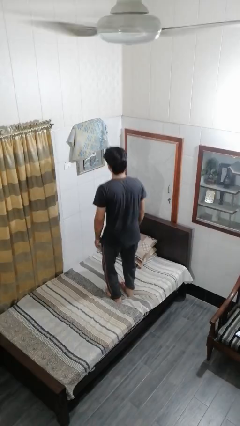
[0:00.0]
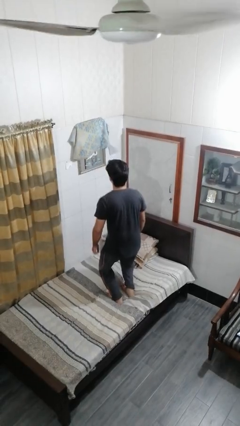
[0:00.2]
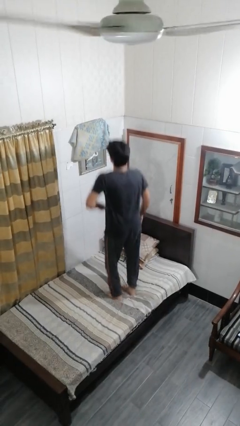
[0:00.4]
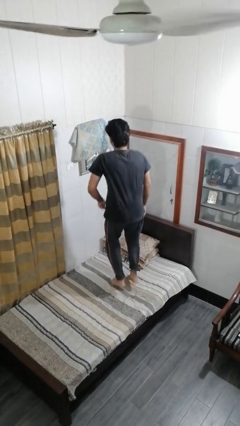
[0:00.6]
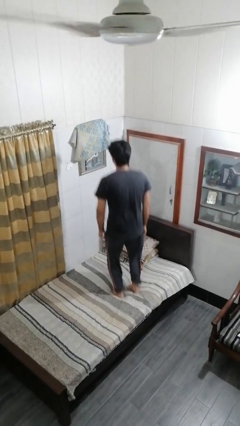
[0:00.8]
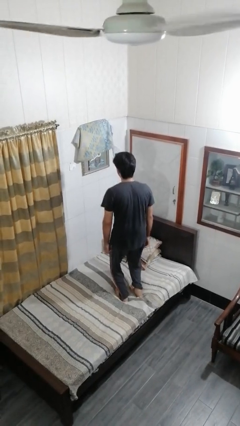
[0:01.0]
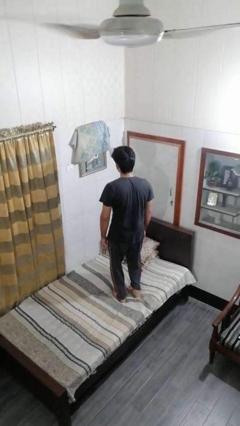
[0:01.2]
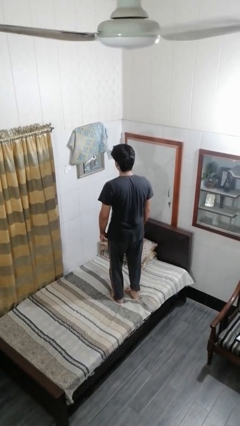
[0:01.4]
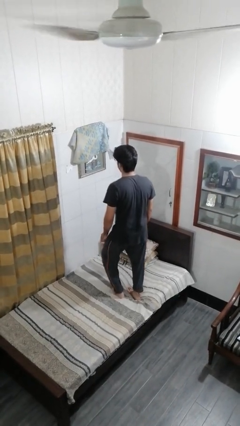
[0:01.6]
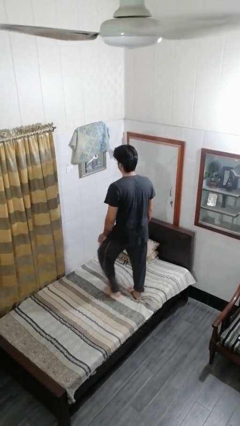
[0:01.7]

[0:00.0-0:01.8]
person jumps on bed

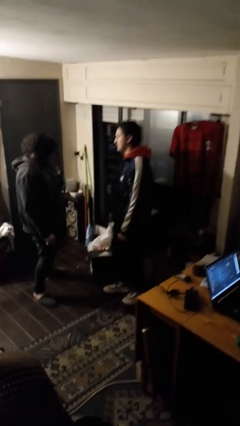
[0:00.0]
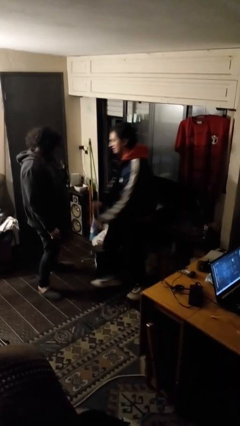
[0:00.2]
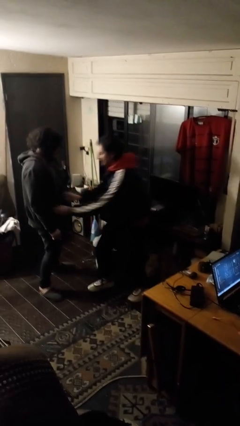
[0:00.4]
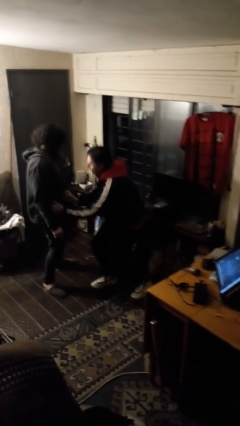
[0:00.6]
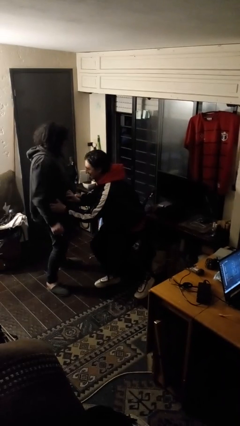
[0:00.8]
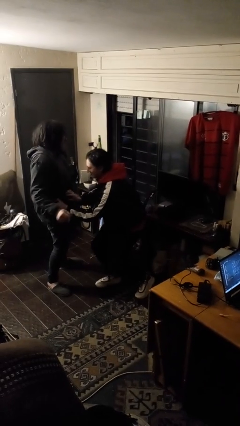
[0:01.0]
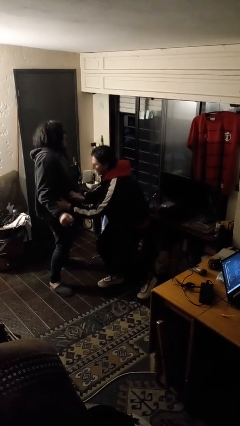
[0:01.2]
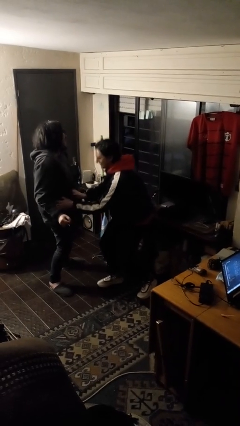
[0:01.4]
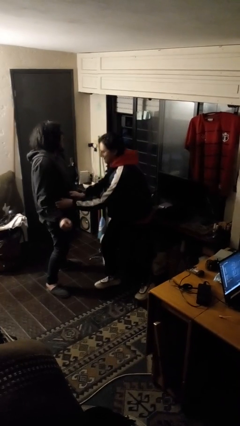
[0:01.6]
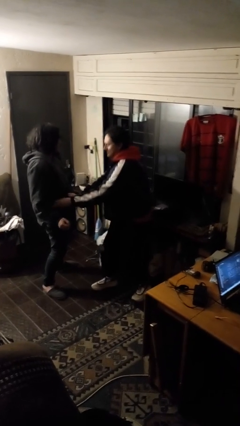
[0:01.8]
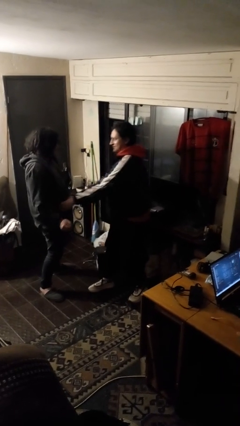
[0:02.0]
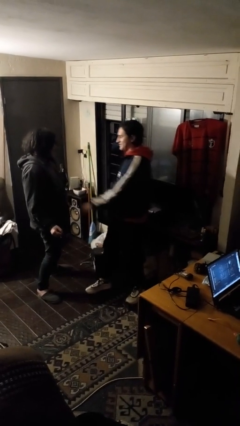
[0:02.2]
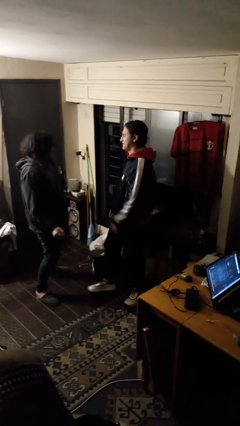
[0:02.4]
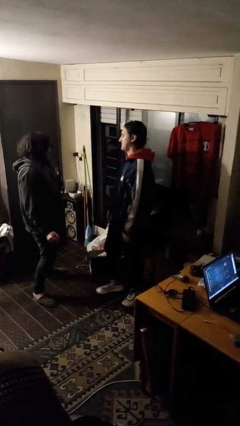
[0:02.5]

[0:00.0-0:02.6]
person tickles person

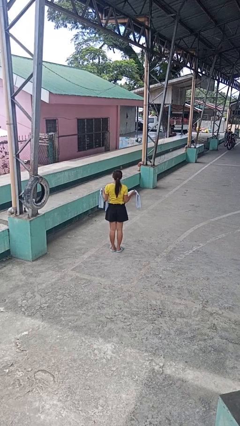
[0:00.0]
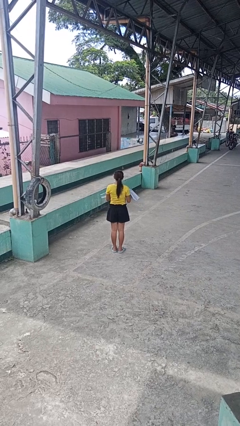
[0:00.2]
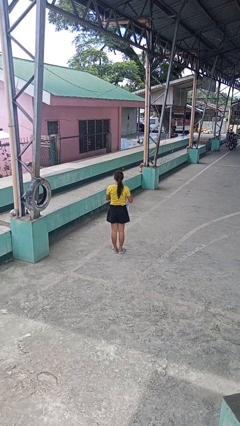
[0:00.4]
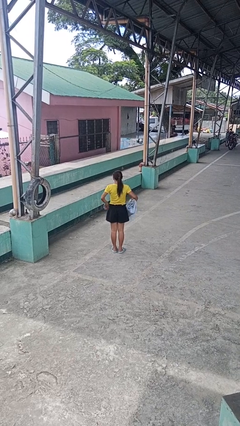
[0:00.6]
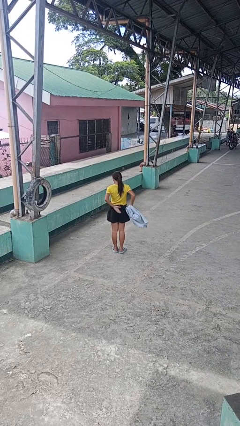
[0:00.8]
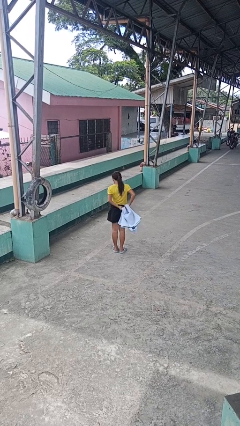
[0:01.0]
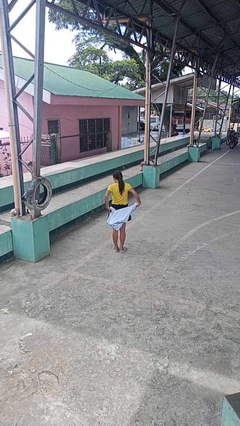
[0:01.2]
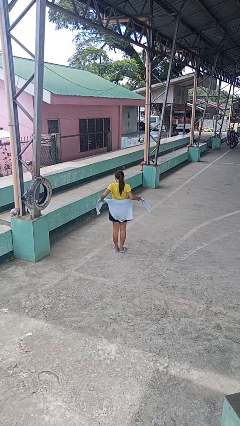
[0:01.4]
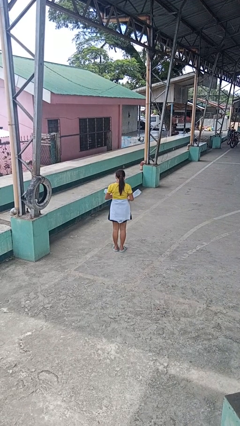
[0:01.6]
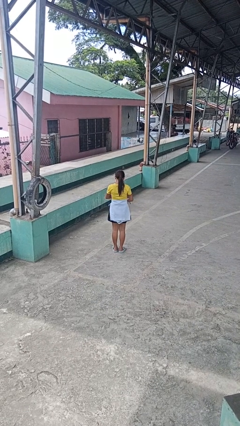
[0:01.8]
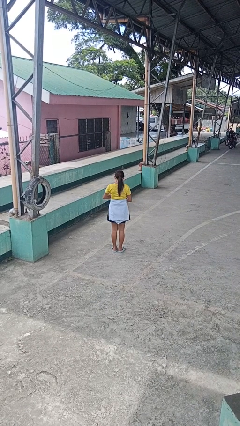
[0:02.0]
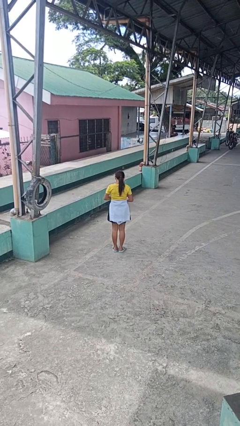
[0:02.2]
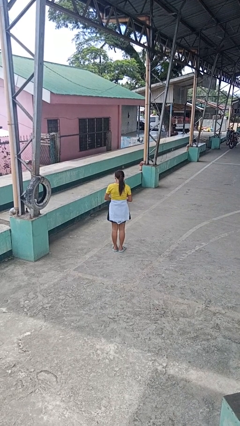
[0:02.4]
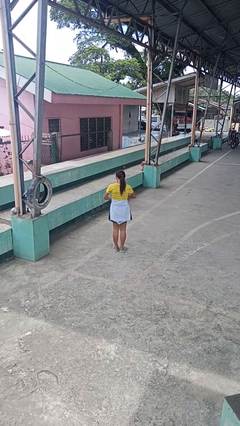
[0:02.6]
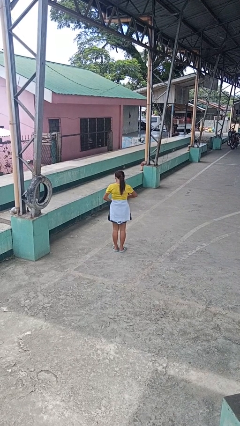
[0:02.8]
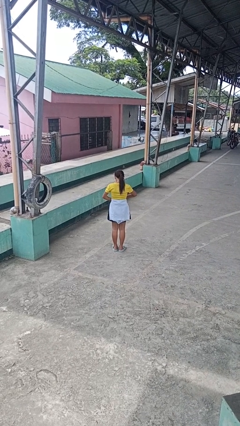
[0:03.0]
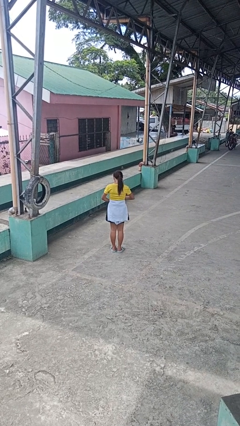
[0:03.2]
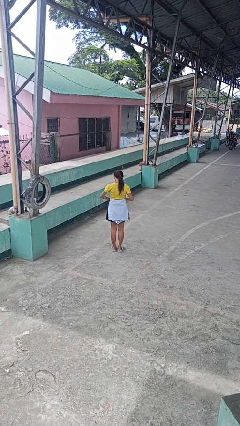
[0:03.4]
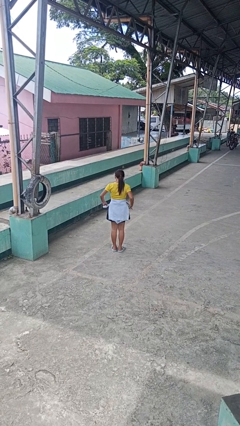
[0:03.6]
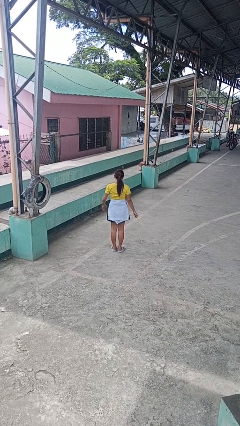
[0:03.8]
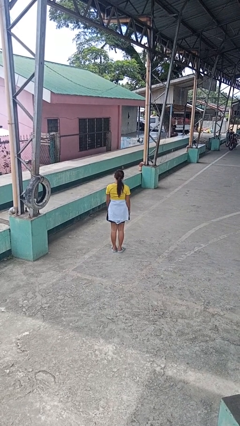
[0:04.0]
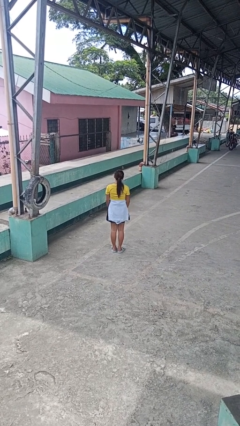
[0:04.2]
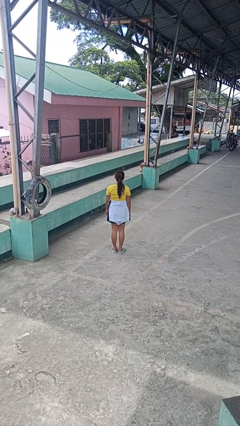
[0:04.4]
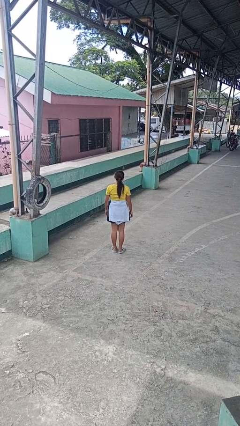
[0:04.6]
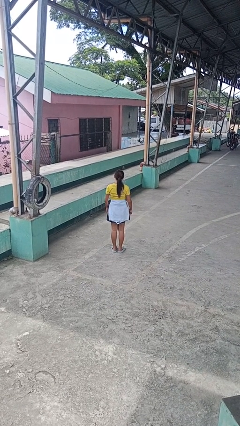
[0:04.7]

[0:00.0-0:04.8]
person ties jacket around waist

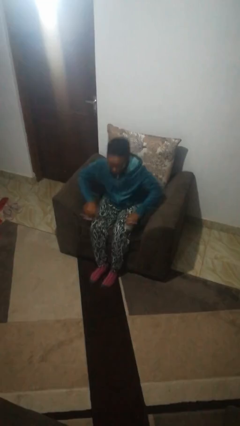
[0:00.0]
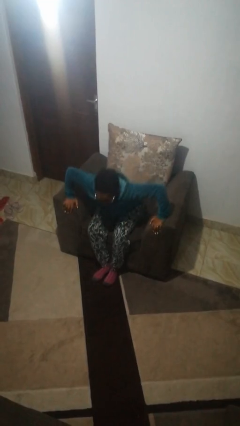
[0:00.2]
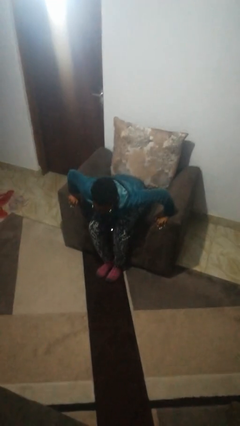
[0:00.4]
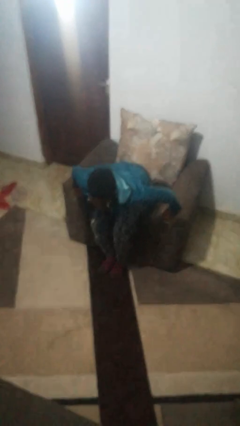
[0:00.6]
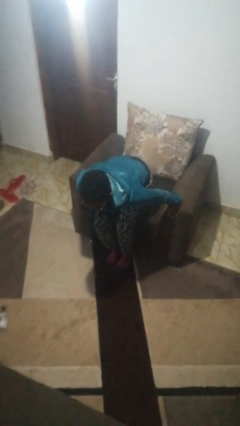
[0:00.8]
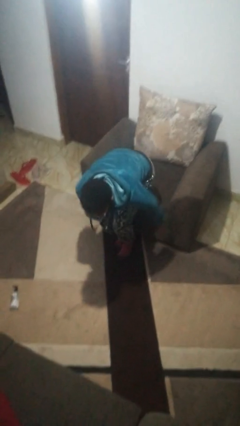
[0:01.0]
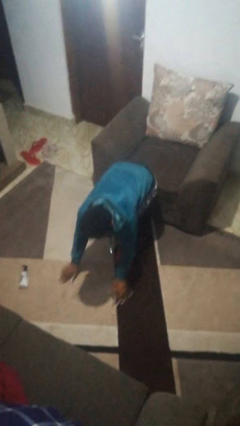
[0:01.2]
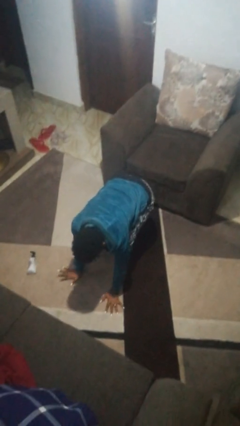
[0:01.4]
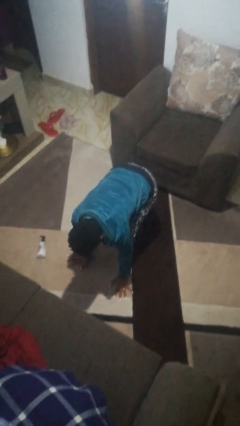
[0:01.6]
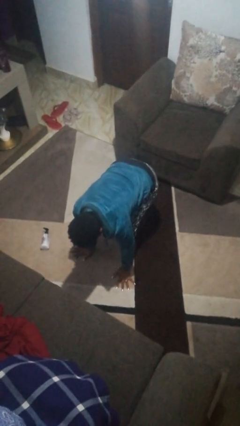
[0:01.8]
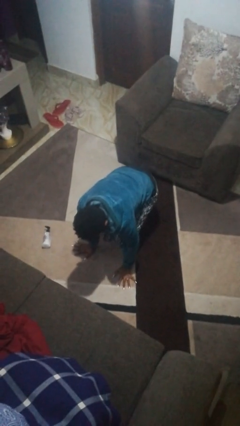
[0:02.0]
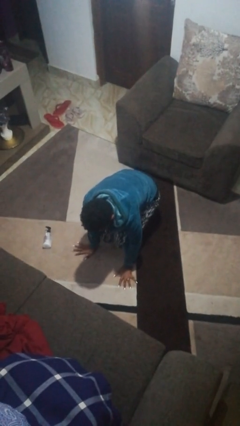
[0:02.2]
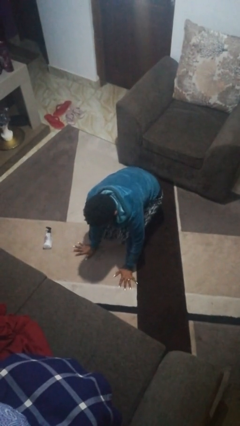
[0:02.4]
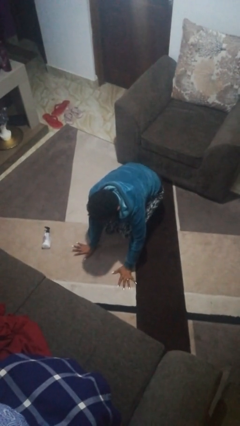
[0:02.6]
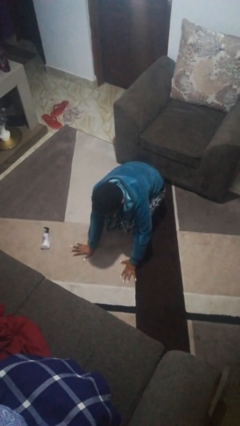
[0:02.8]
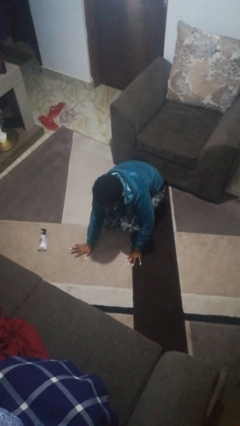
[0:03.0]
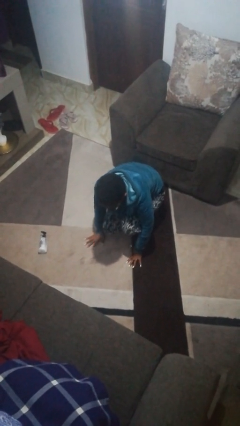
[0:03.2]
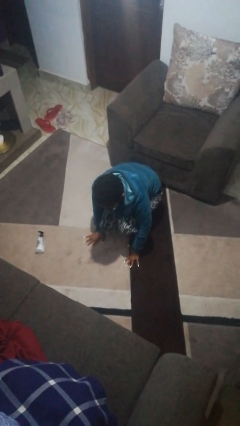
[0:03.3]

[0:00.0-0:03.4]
person falls from chair

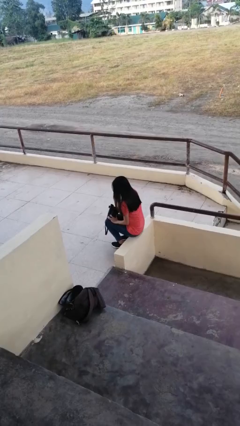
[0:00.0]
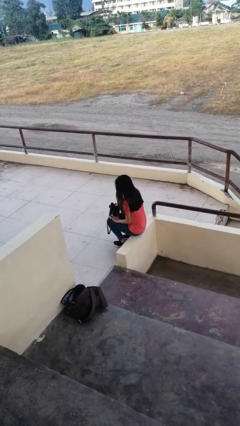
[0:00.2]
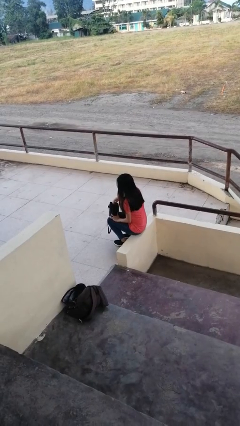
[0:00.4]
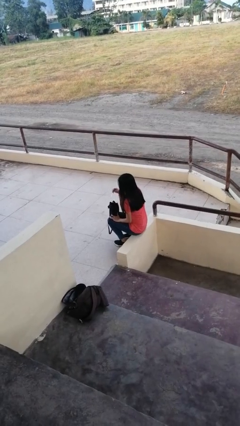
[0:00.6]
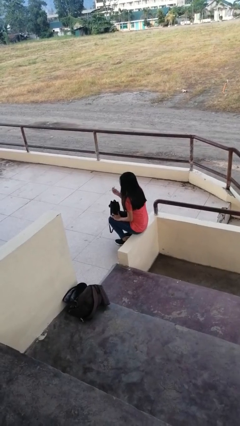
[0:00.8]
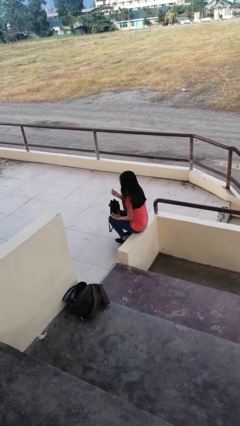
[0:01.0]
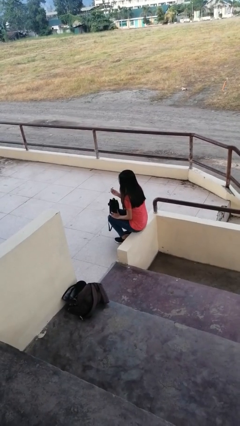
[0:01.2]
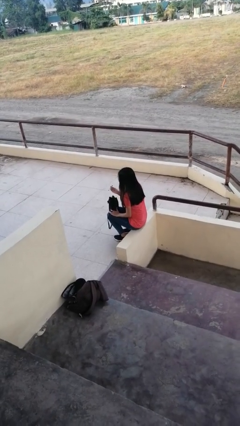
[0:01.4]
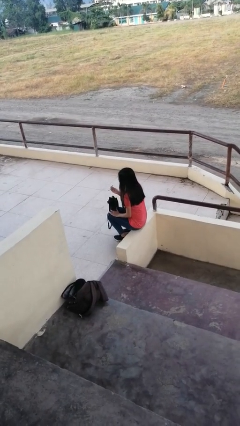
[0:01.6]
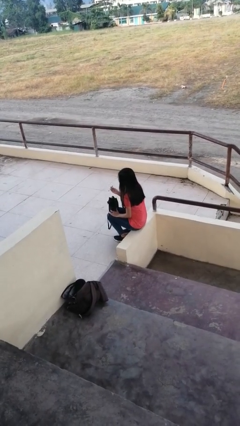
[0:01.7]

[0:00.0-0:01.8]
person takes object from purse

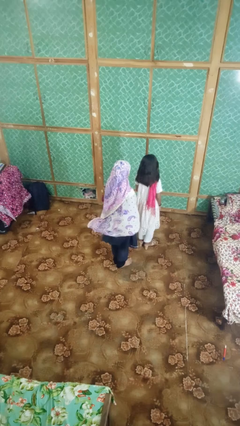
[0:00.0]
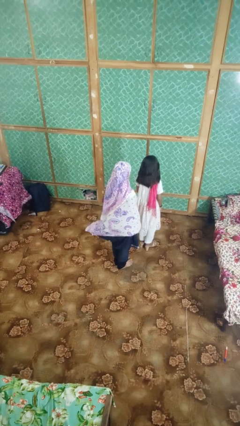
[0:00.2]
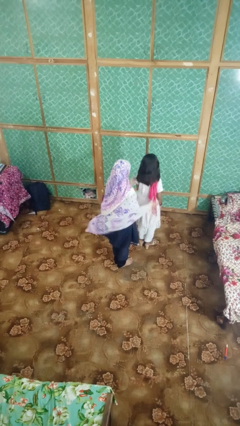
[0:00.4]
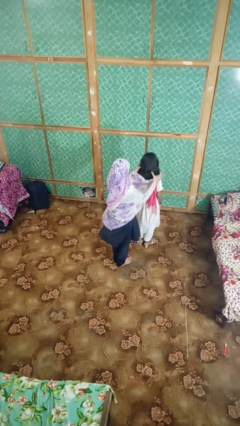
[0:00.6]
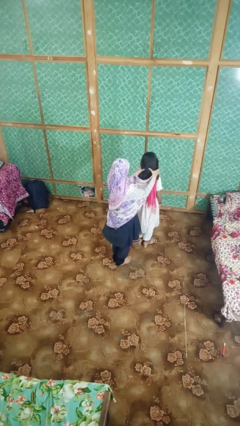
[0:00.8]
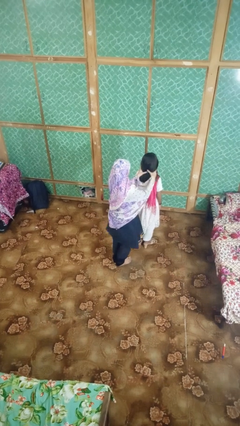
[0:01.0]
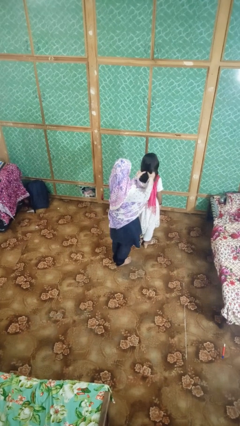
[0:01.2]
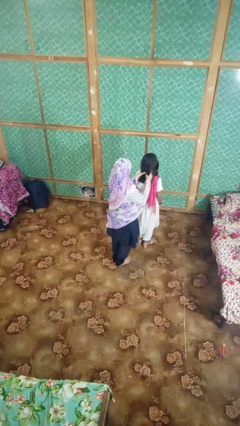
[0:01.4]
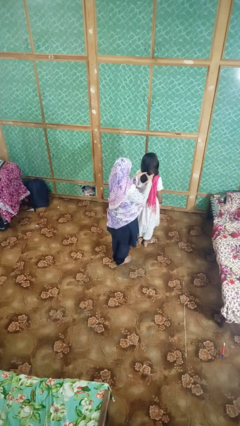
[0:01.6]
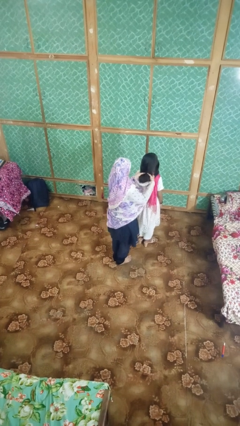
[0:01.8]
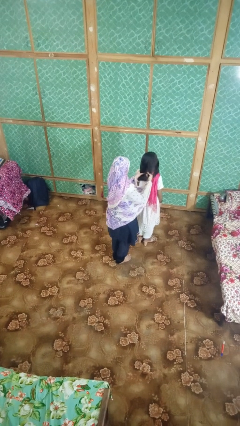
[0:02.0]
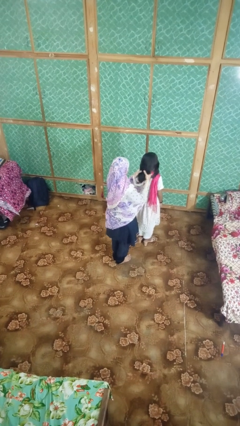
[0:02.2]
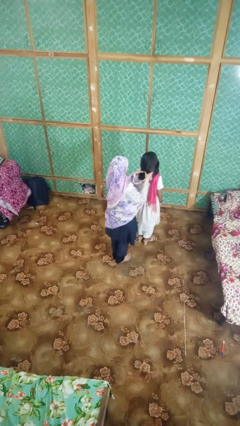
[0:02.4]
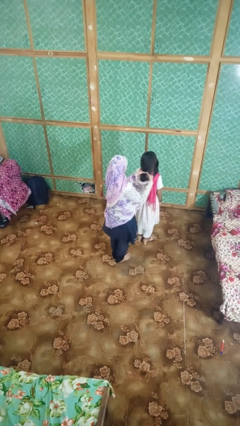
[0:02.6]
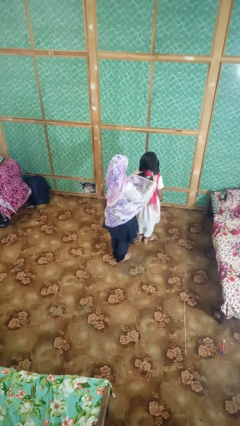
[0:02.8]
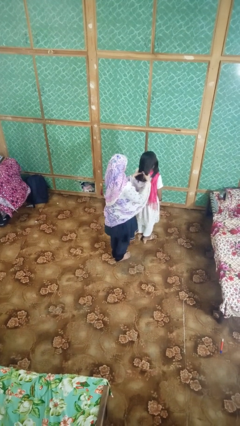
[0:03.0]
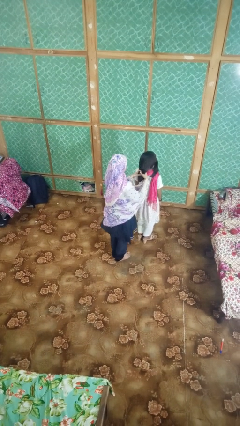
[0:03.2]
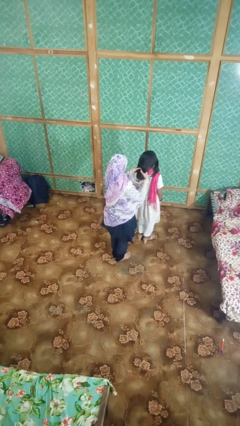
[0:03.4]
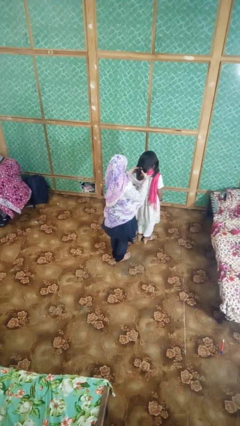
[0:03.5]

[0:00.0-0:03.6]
person braids hair of person
